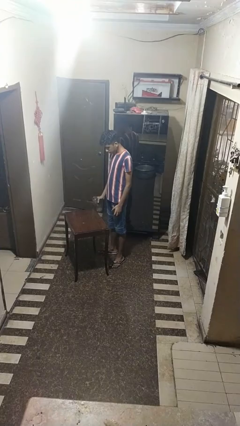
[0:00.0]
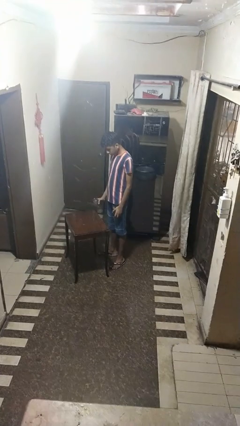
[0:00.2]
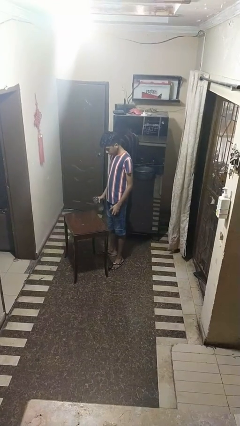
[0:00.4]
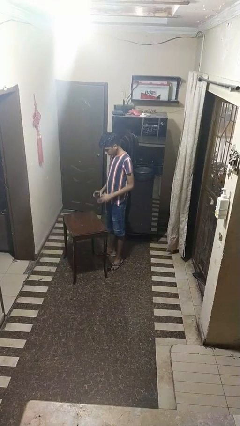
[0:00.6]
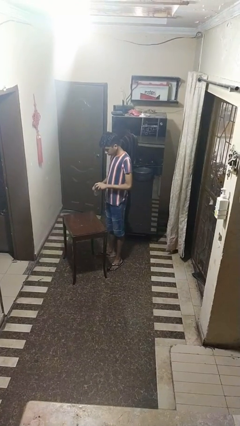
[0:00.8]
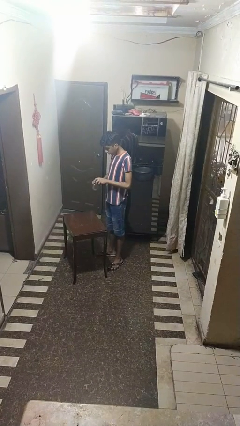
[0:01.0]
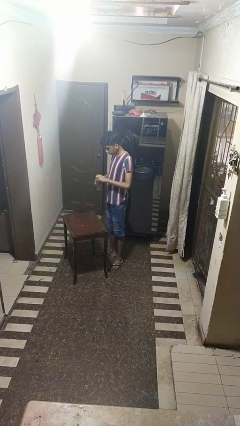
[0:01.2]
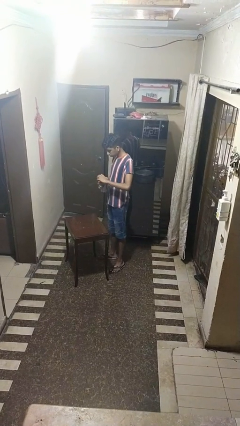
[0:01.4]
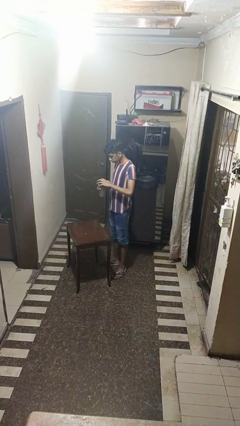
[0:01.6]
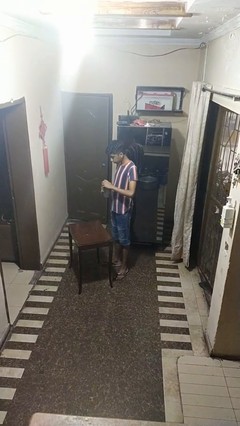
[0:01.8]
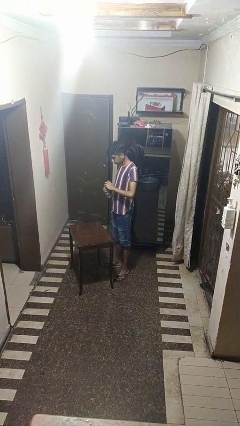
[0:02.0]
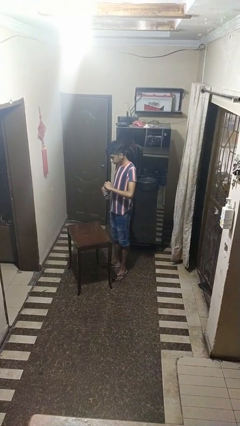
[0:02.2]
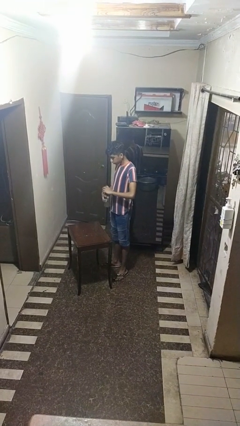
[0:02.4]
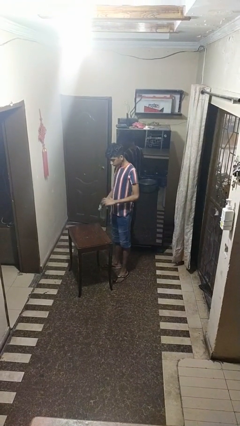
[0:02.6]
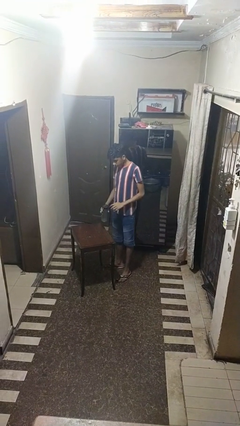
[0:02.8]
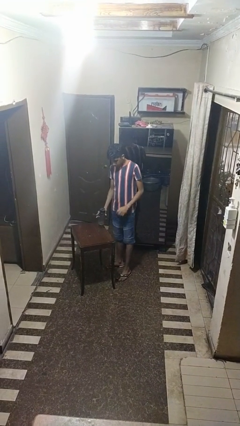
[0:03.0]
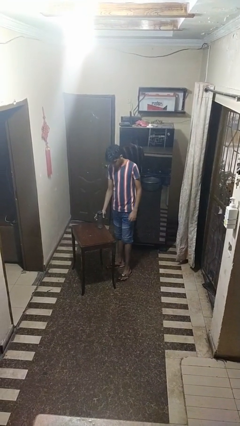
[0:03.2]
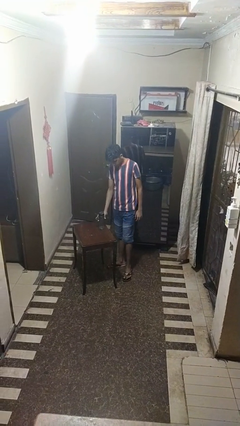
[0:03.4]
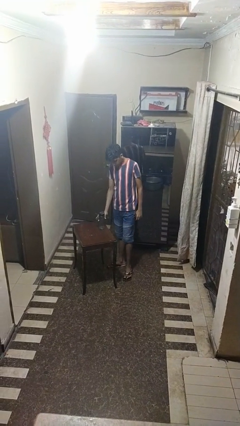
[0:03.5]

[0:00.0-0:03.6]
person screws lid to bottle

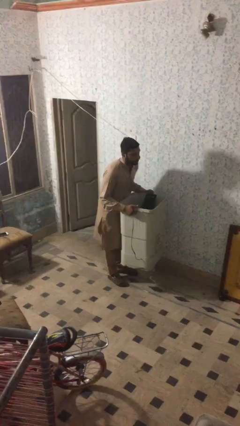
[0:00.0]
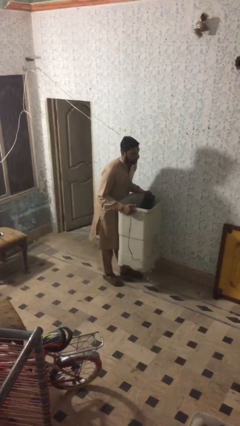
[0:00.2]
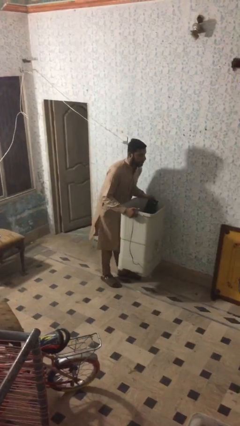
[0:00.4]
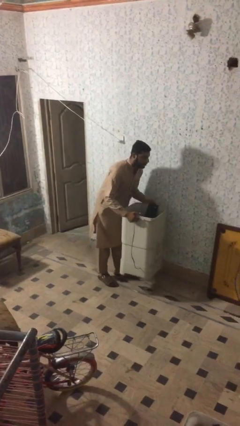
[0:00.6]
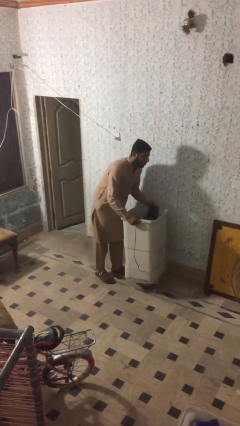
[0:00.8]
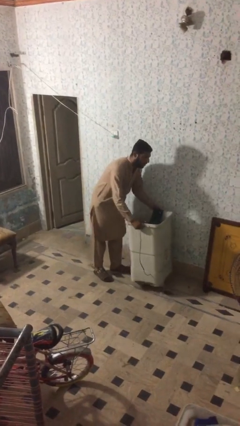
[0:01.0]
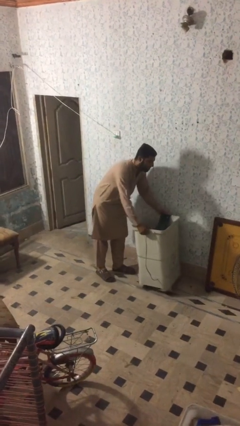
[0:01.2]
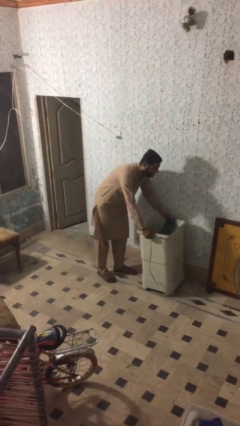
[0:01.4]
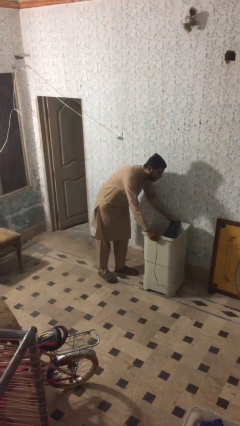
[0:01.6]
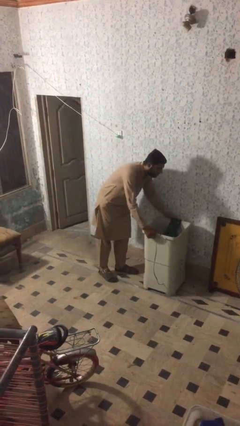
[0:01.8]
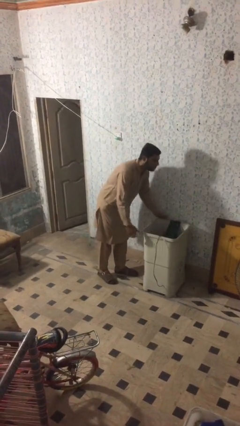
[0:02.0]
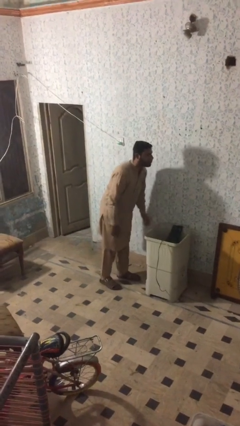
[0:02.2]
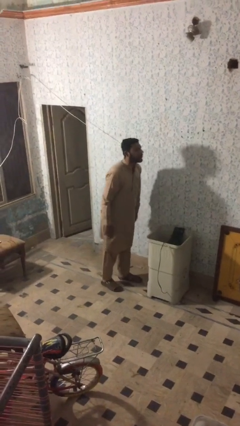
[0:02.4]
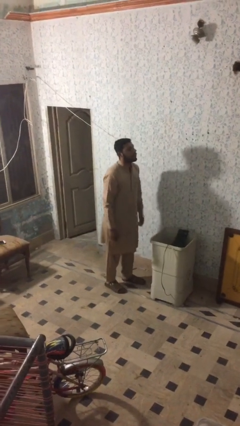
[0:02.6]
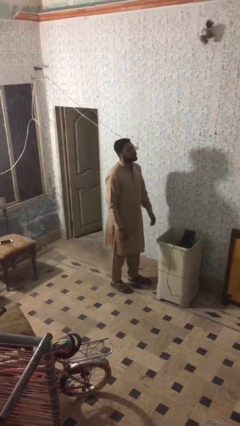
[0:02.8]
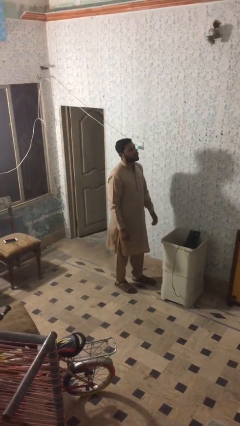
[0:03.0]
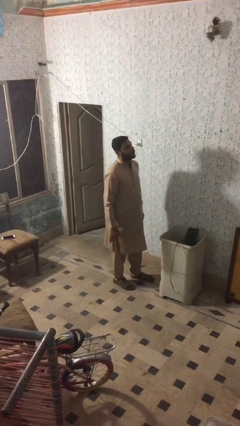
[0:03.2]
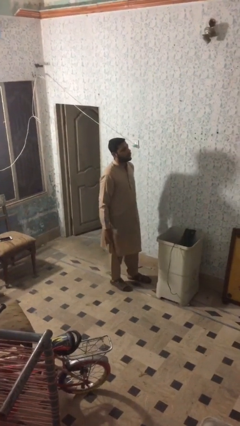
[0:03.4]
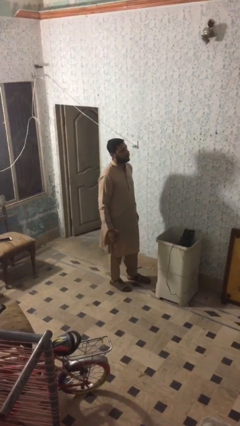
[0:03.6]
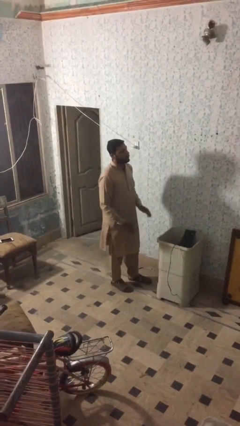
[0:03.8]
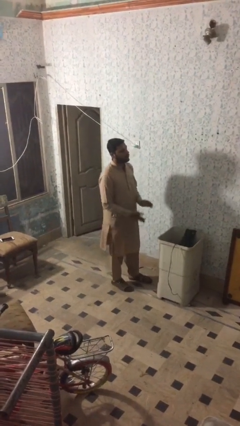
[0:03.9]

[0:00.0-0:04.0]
person puts down object on floor

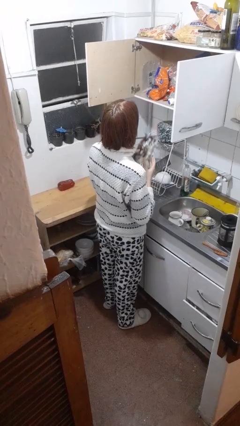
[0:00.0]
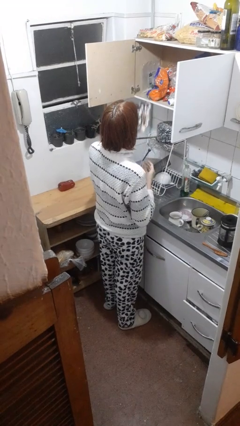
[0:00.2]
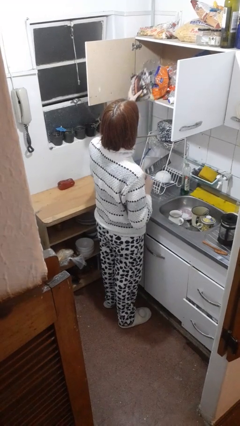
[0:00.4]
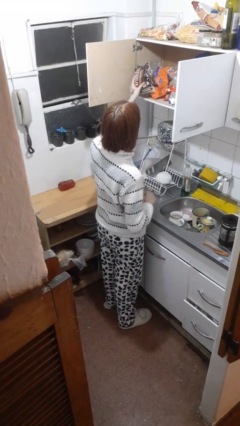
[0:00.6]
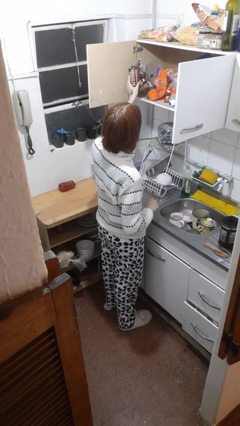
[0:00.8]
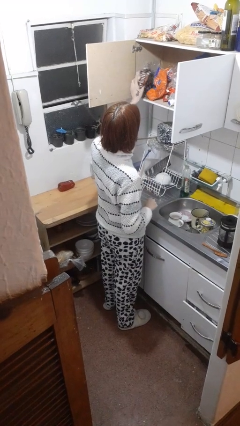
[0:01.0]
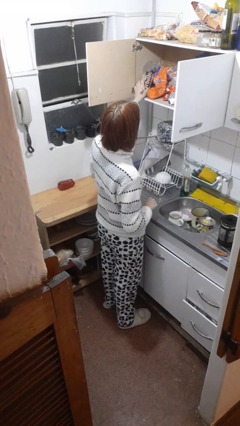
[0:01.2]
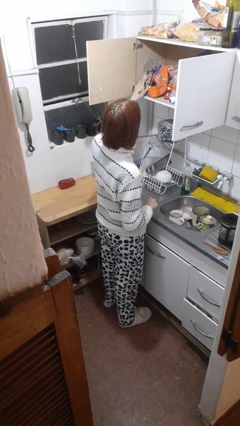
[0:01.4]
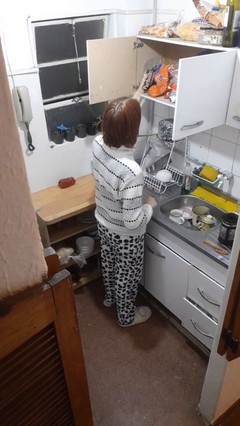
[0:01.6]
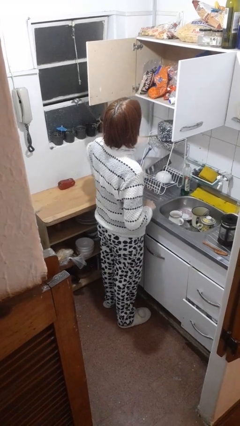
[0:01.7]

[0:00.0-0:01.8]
person puts object in cabinet

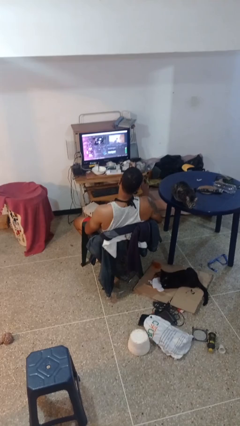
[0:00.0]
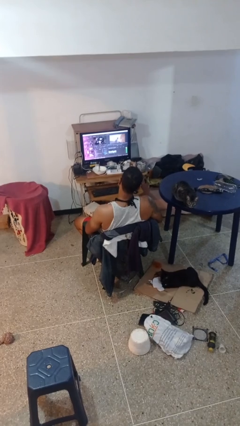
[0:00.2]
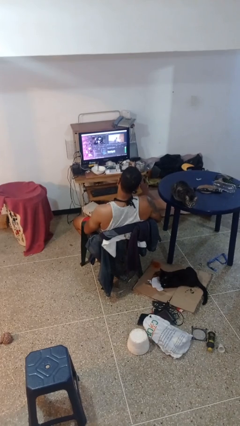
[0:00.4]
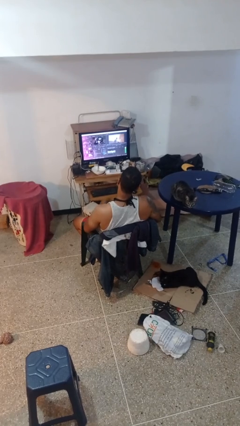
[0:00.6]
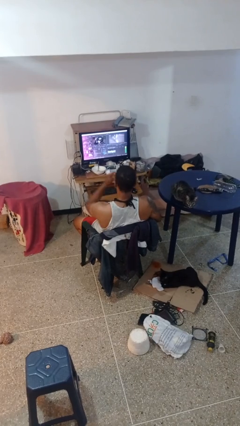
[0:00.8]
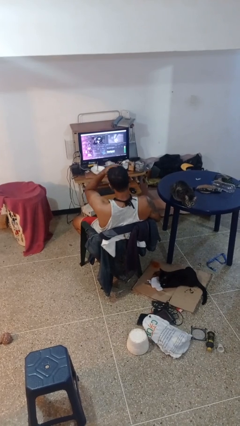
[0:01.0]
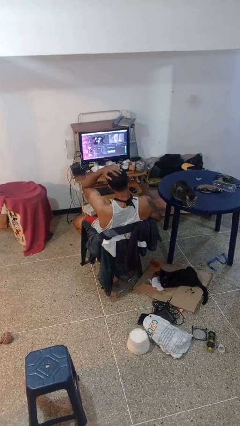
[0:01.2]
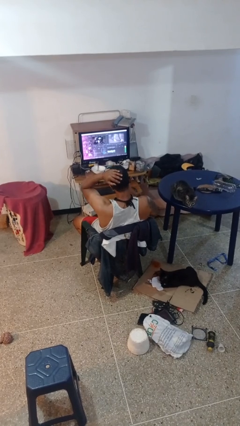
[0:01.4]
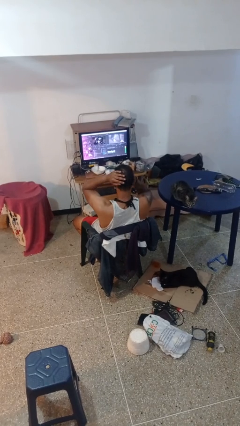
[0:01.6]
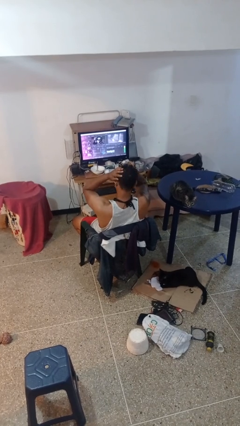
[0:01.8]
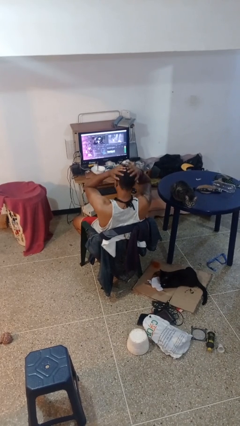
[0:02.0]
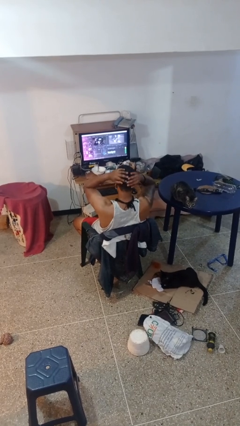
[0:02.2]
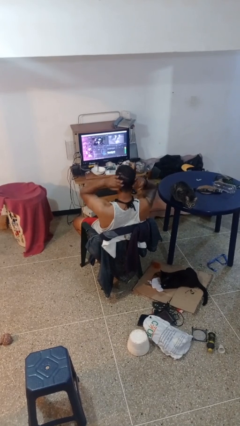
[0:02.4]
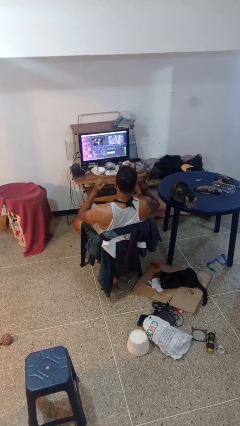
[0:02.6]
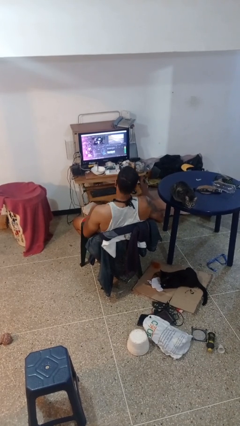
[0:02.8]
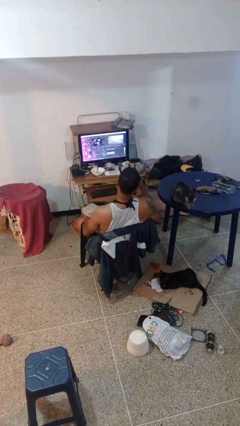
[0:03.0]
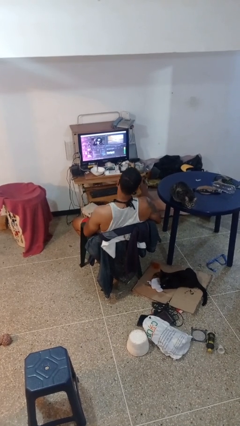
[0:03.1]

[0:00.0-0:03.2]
person strokes hair

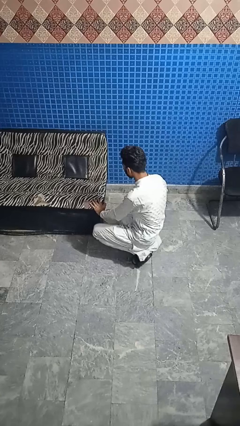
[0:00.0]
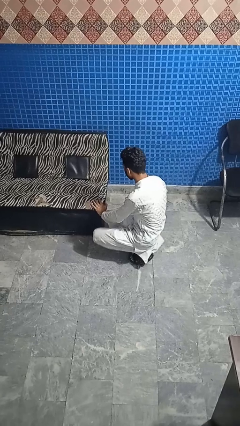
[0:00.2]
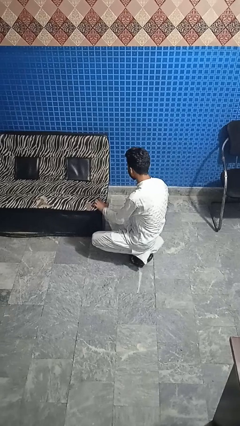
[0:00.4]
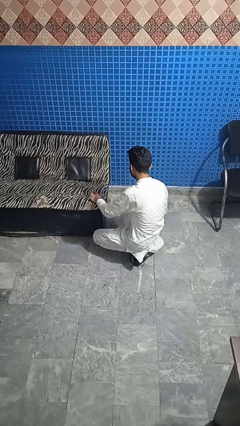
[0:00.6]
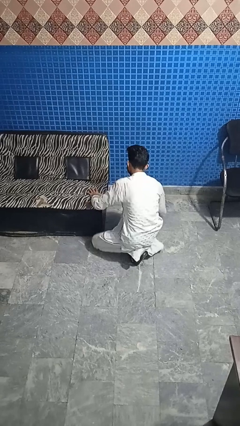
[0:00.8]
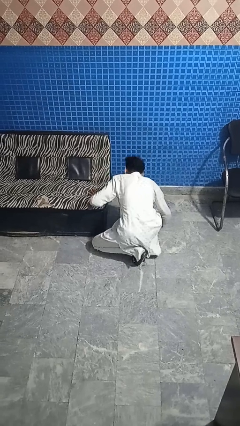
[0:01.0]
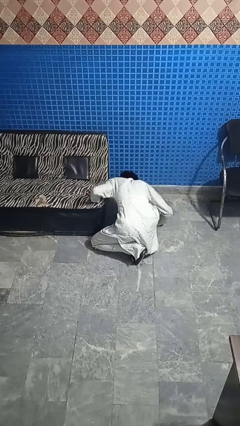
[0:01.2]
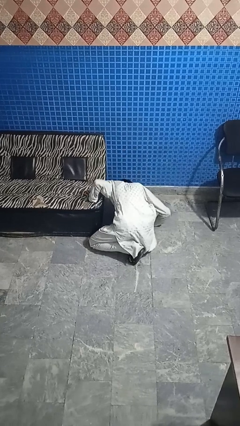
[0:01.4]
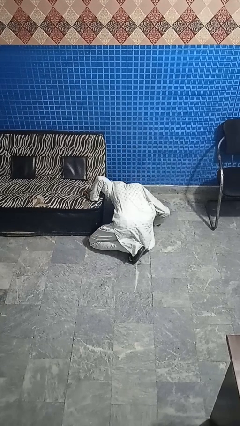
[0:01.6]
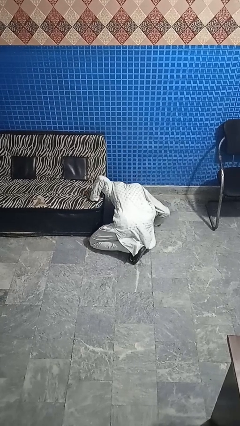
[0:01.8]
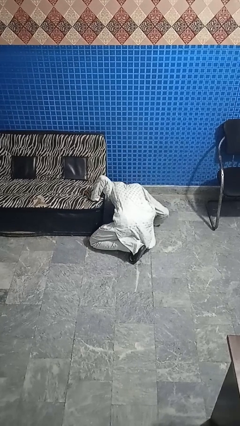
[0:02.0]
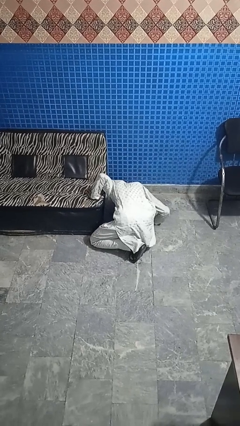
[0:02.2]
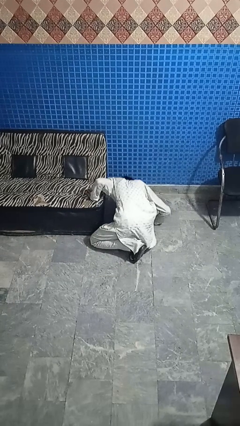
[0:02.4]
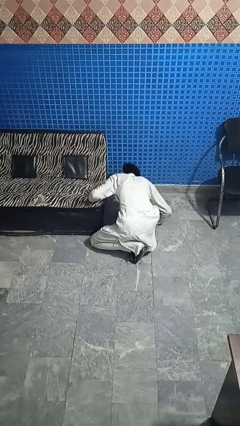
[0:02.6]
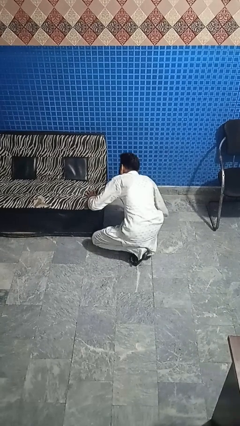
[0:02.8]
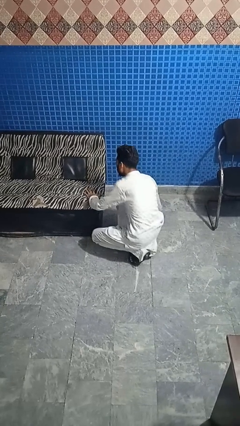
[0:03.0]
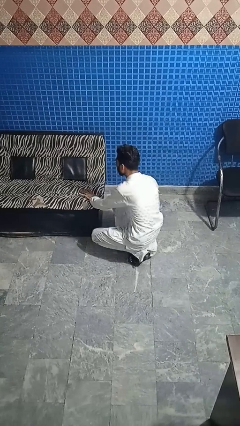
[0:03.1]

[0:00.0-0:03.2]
person searches under couch

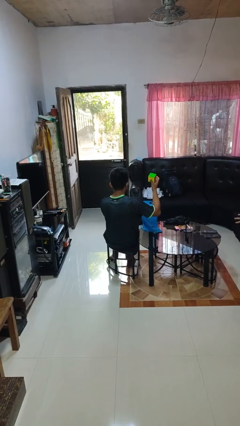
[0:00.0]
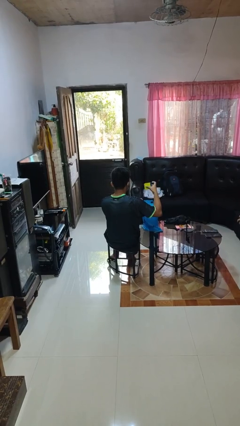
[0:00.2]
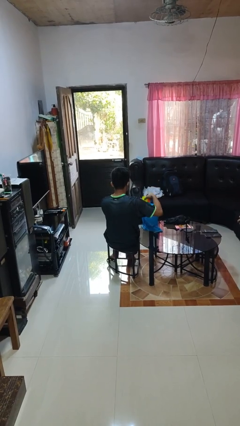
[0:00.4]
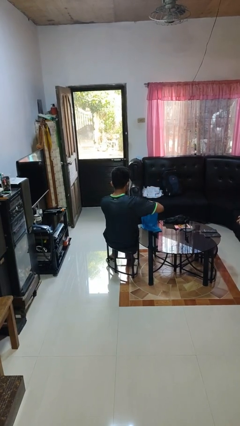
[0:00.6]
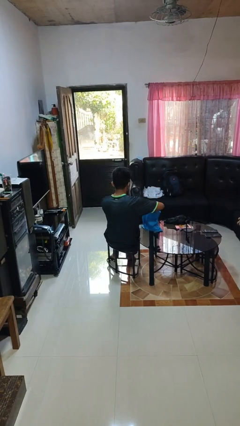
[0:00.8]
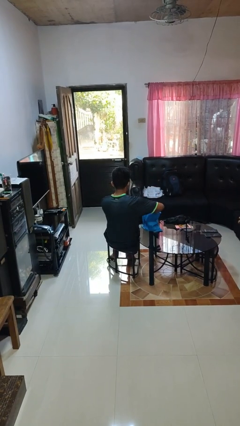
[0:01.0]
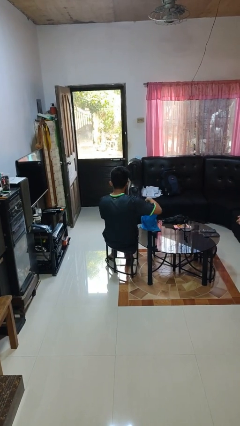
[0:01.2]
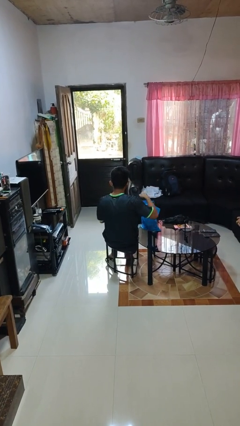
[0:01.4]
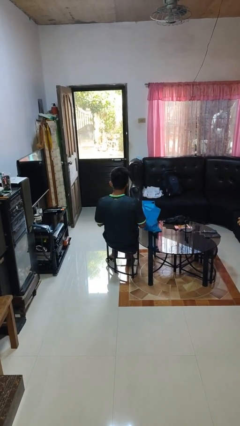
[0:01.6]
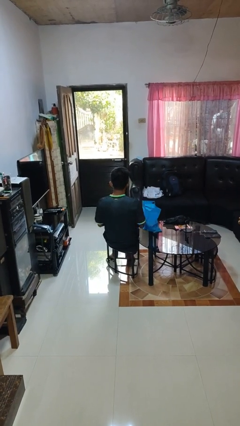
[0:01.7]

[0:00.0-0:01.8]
person puts object into bag

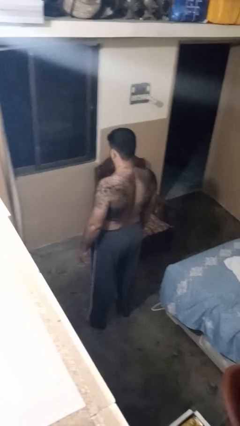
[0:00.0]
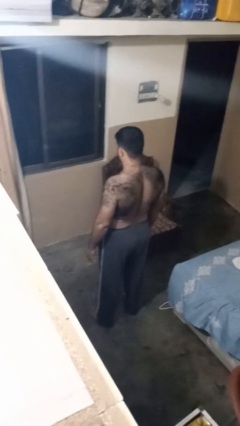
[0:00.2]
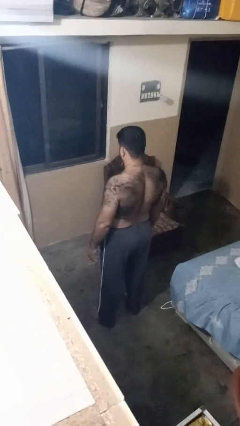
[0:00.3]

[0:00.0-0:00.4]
person crosses legs
